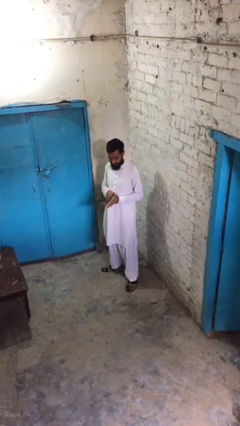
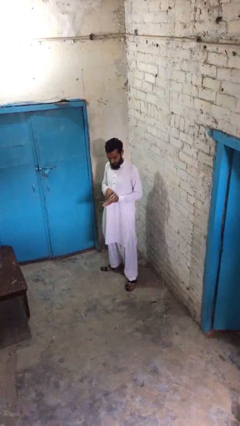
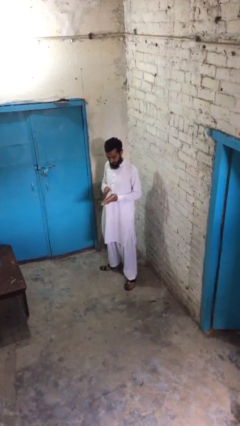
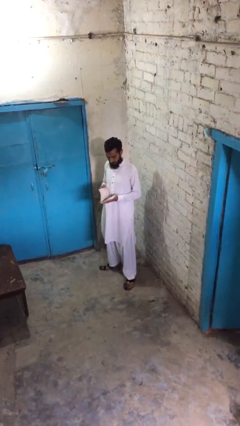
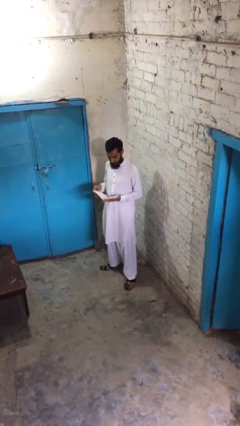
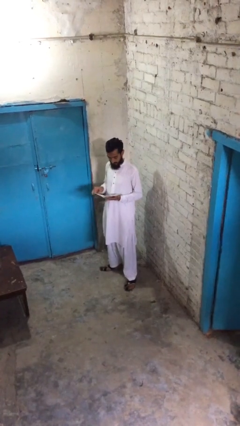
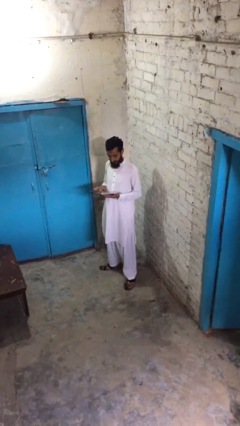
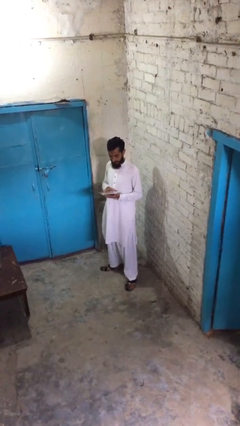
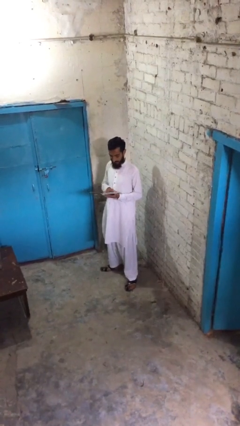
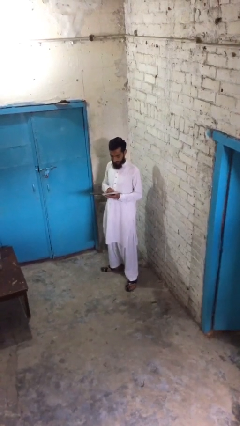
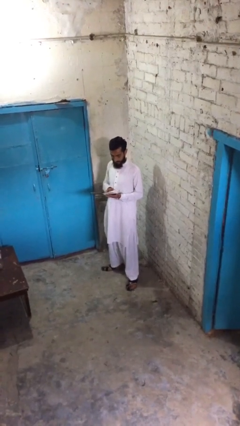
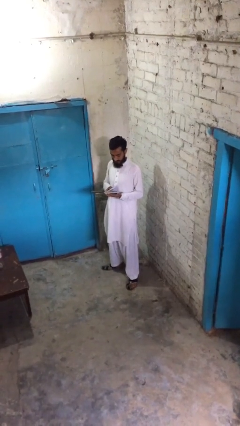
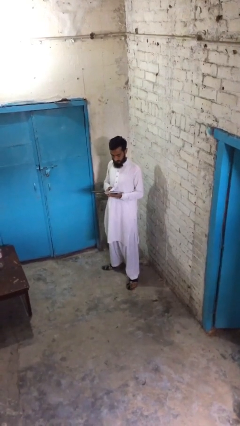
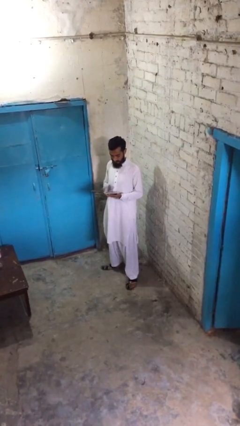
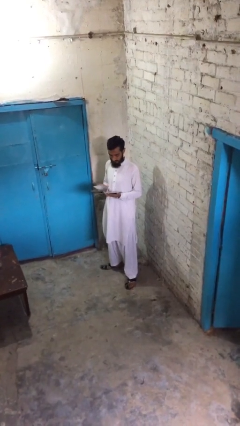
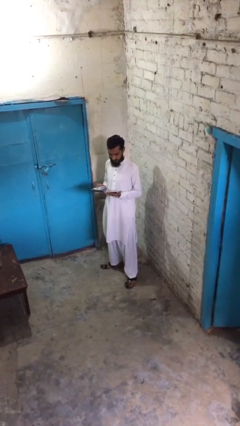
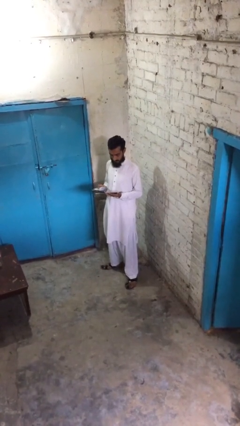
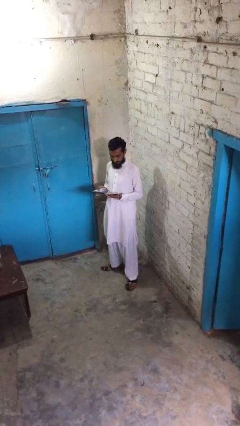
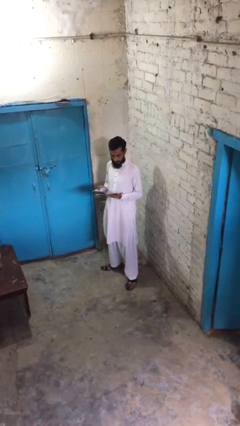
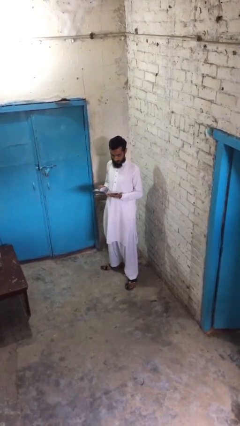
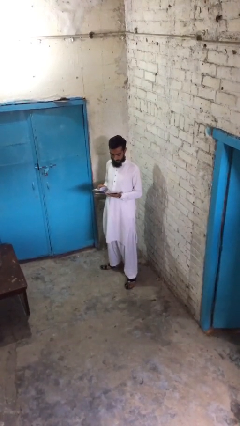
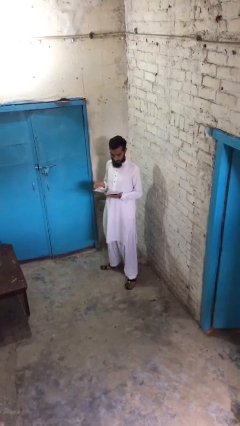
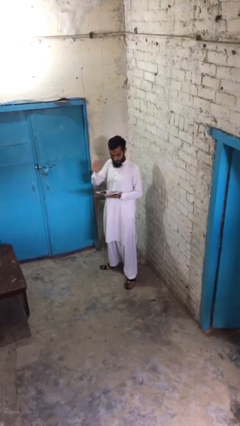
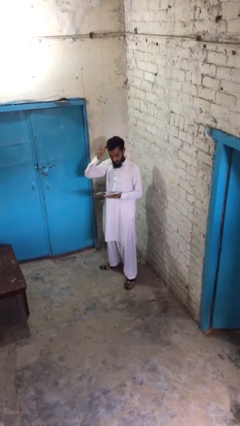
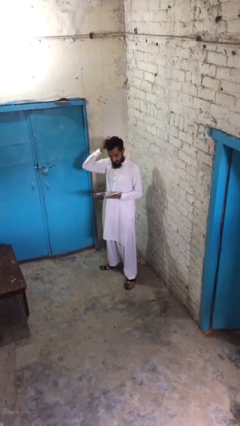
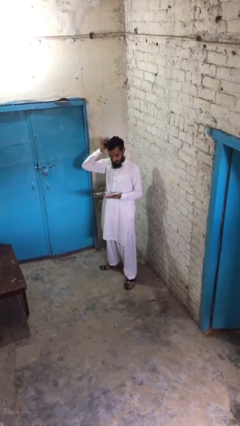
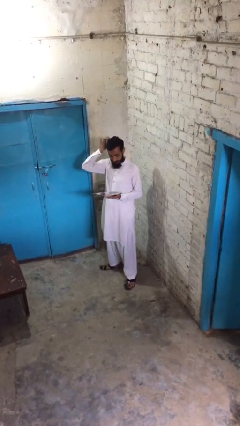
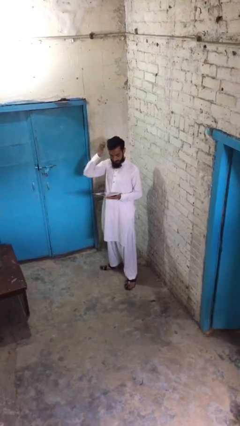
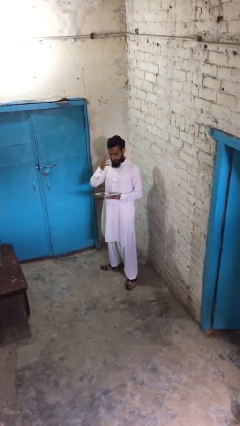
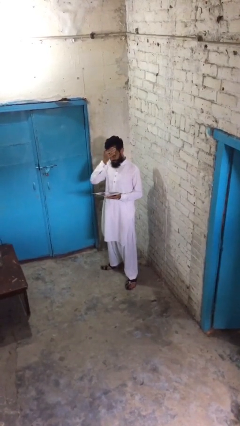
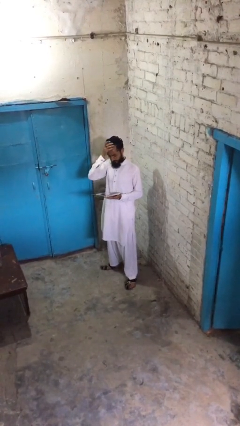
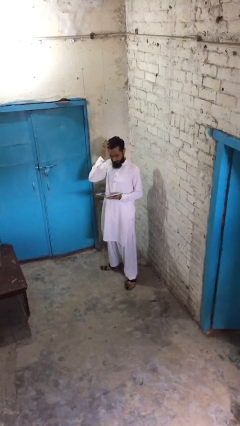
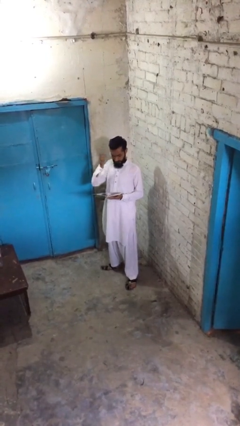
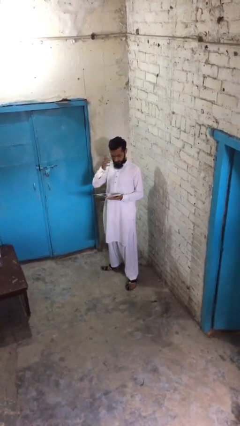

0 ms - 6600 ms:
person reads document

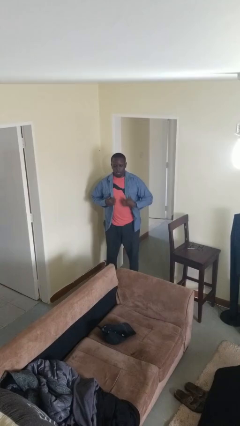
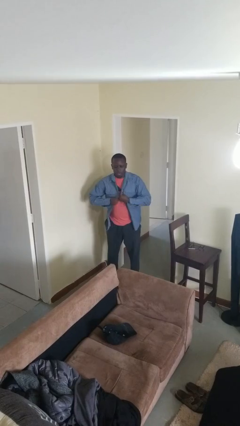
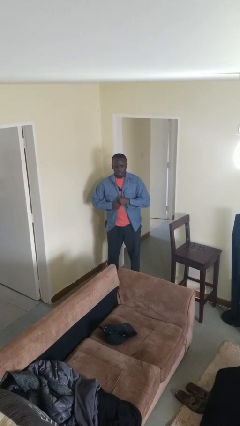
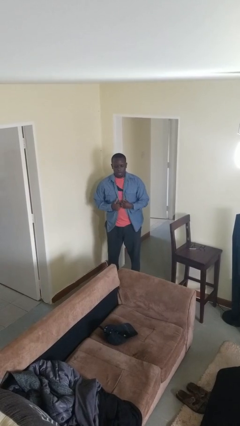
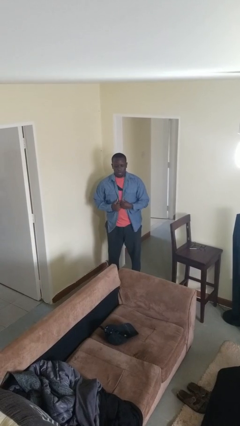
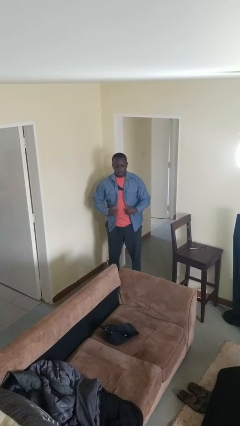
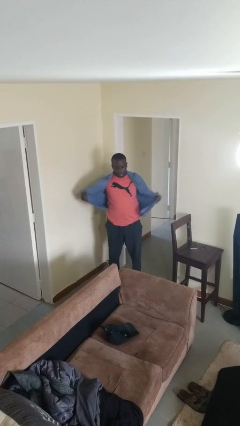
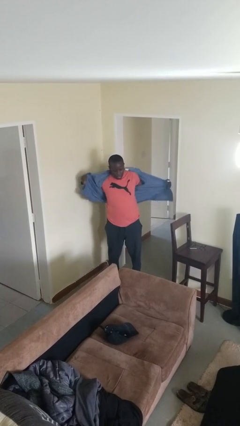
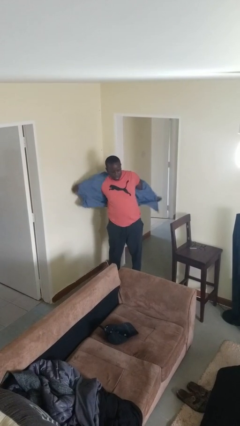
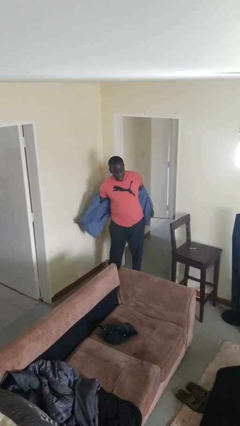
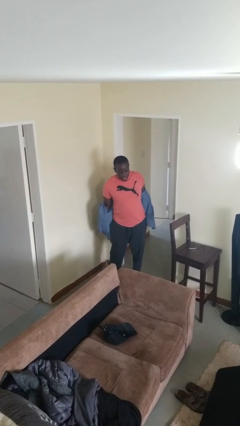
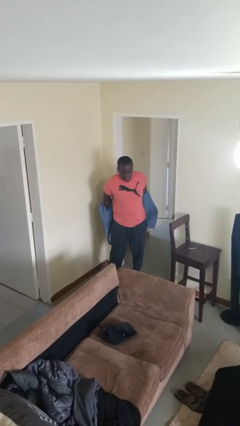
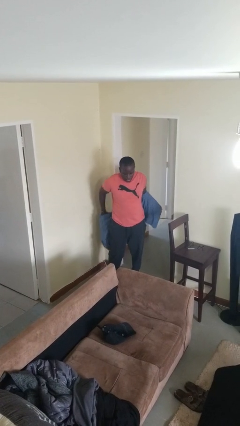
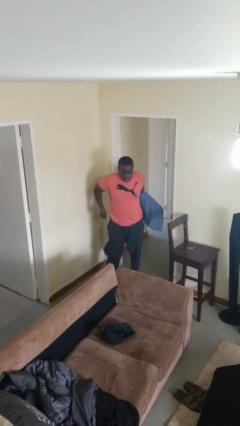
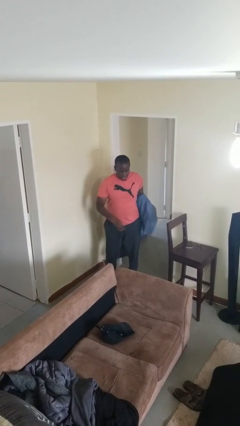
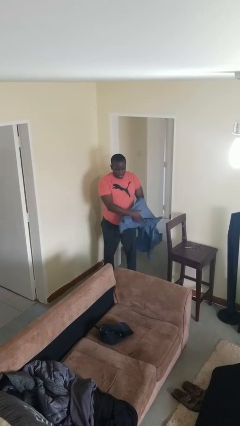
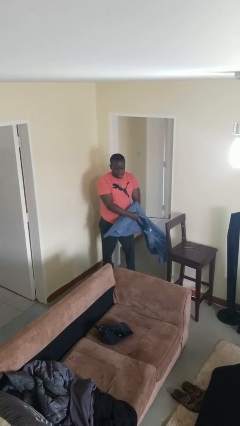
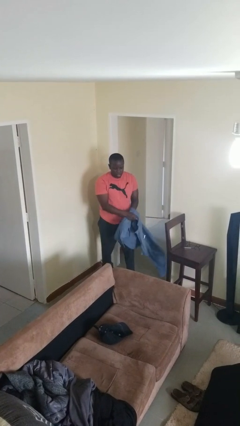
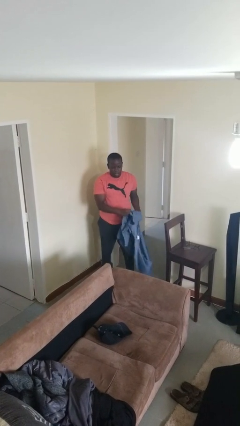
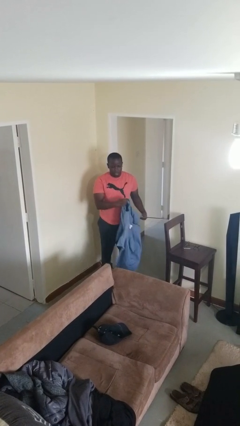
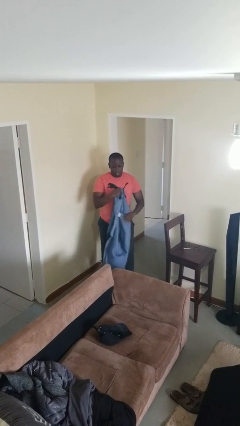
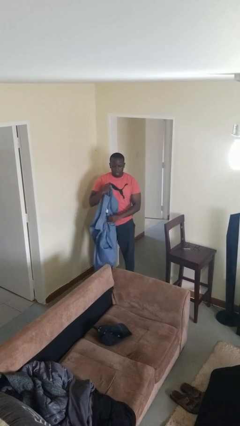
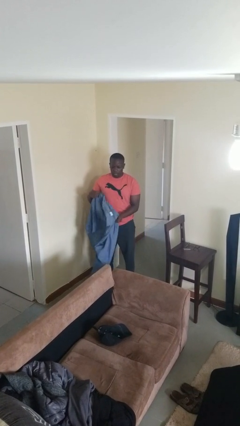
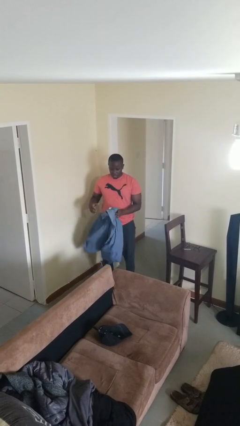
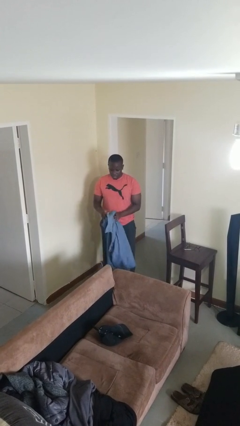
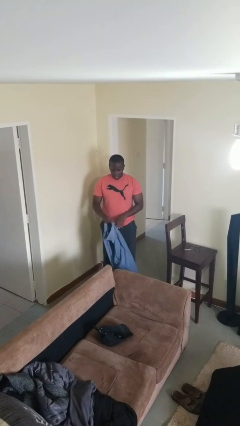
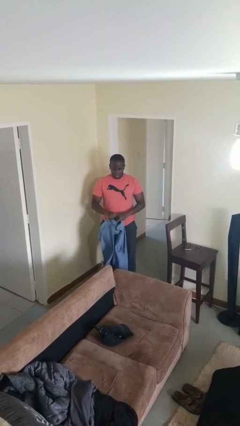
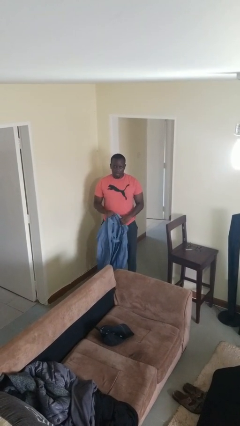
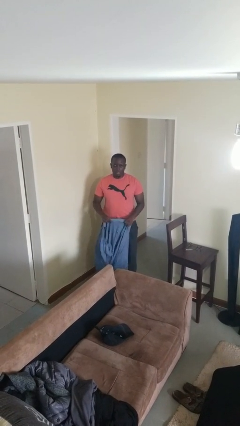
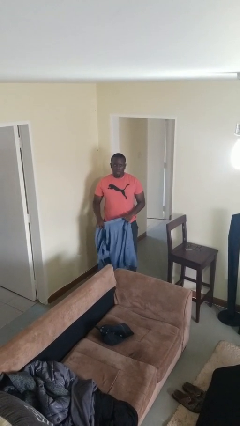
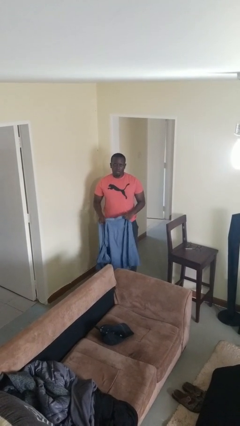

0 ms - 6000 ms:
person takes off shirt

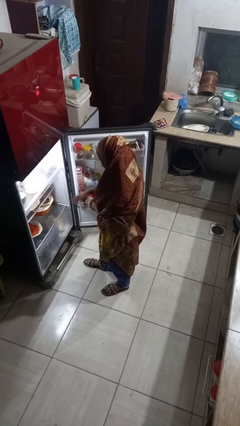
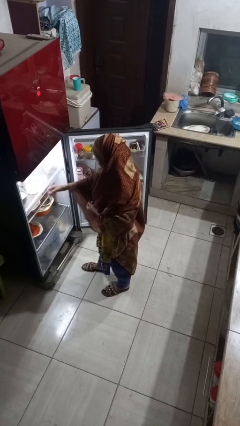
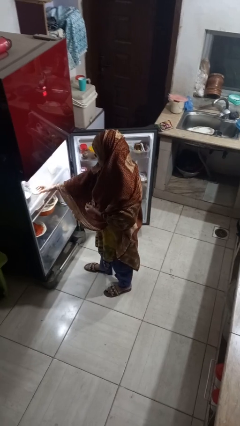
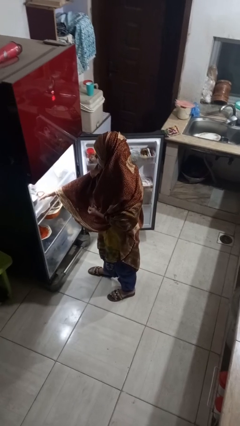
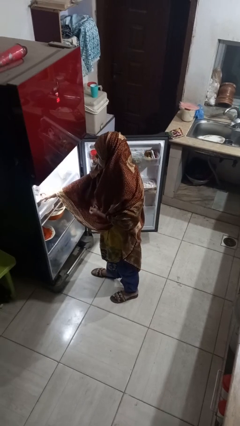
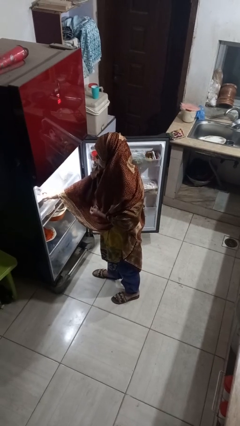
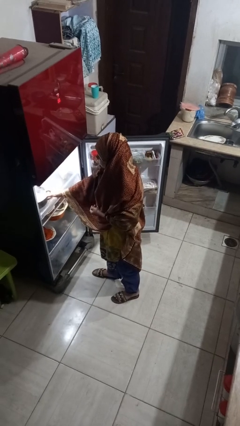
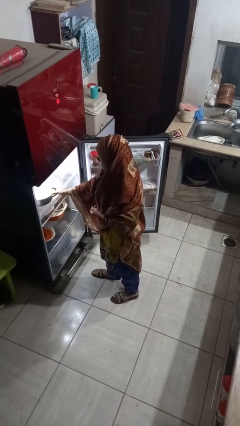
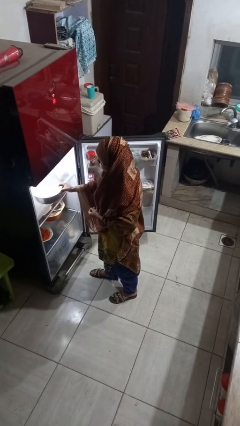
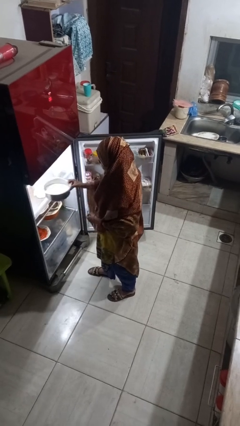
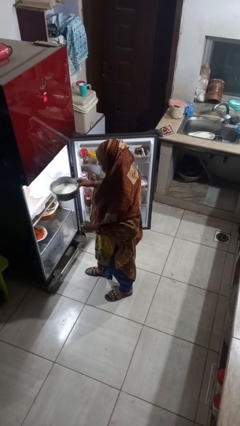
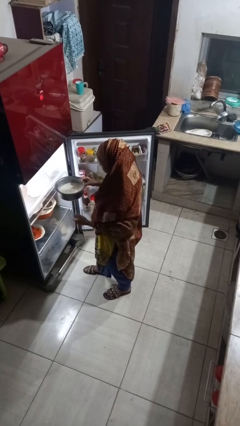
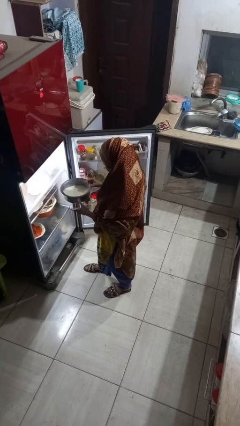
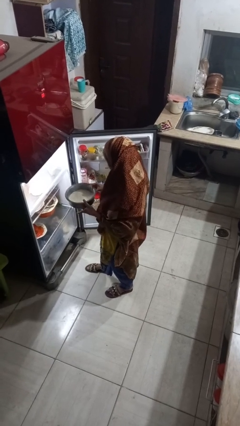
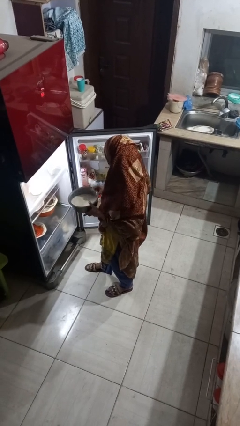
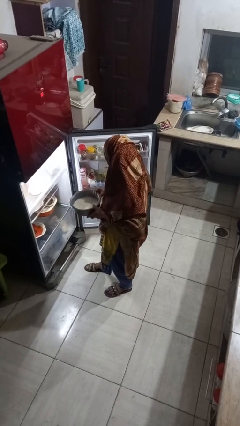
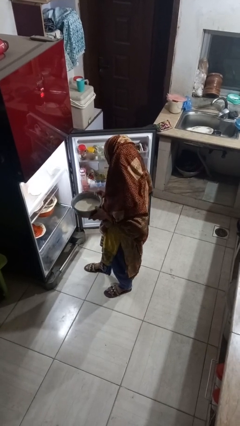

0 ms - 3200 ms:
person takes object from refrigerator

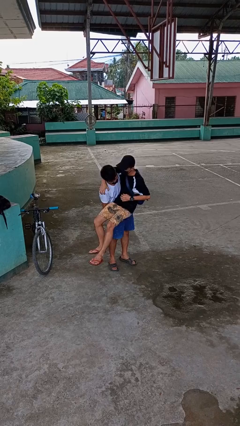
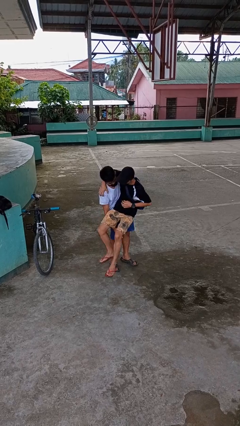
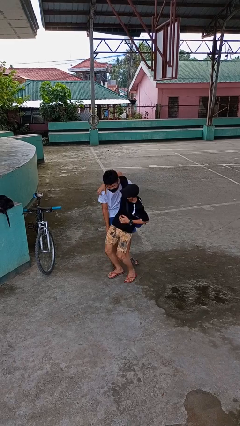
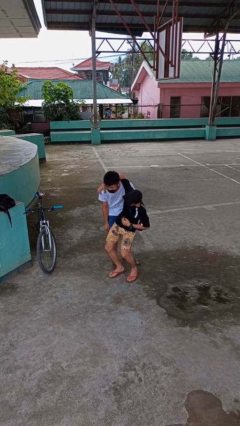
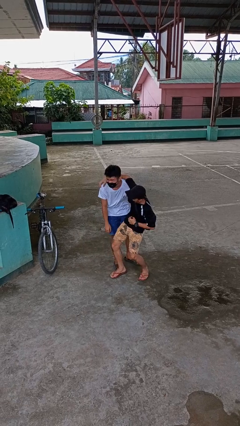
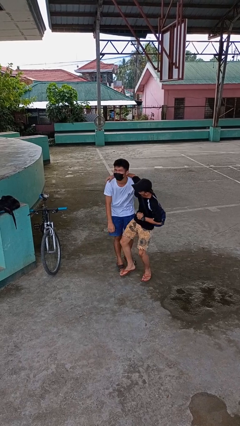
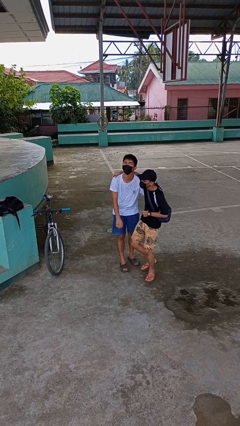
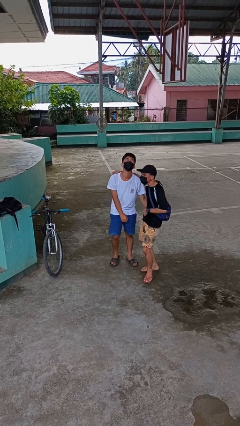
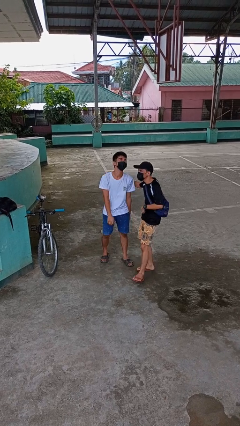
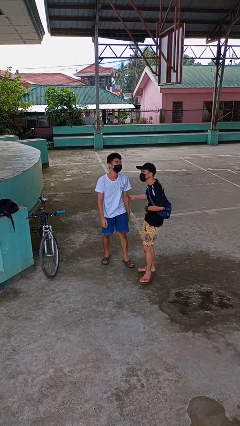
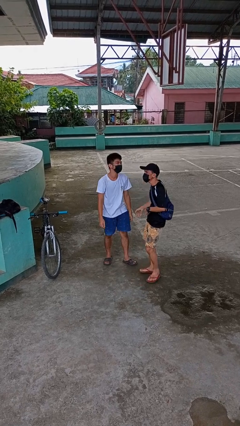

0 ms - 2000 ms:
person puts down person
